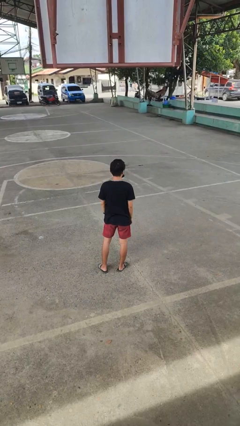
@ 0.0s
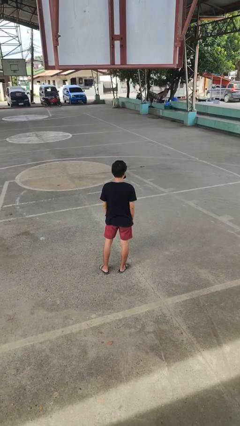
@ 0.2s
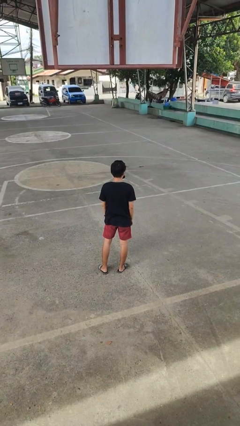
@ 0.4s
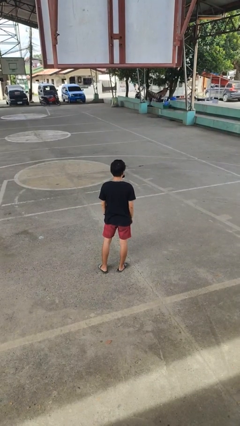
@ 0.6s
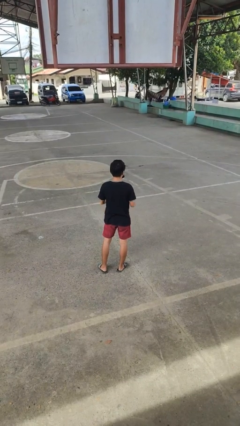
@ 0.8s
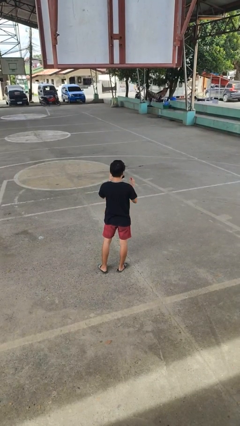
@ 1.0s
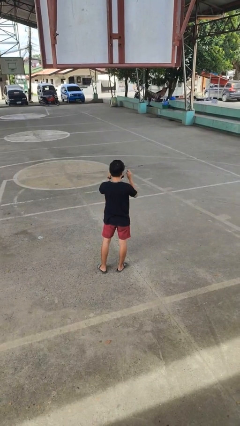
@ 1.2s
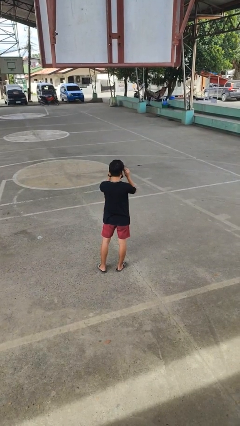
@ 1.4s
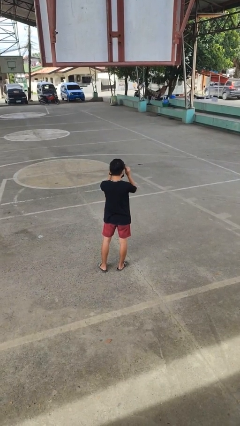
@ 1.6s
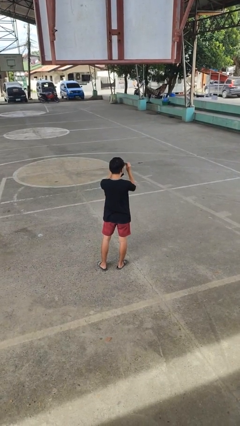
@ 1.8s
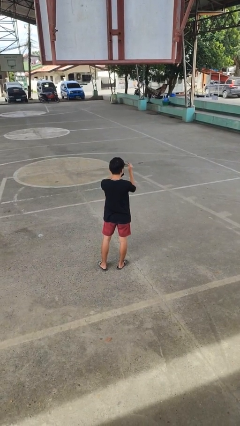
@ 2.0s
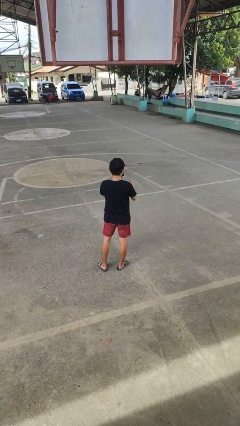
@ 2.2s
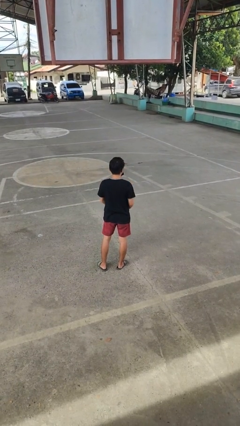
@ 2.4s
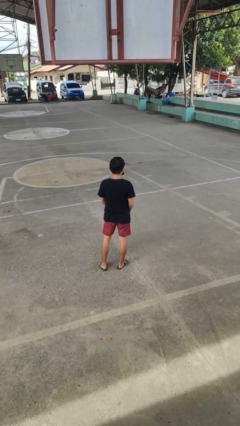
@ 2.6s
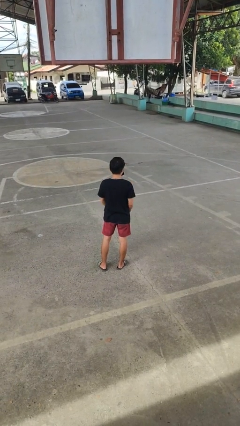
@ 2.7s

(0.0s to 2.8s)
person takes off glasses

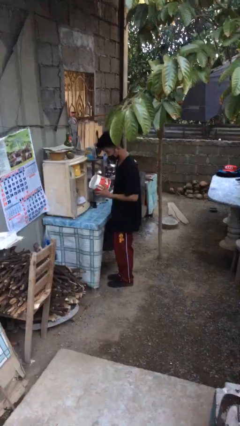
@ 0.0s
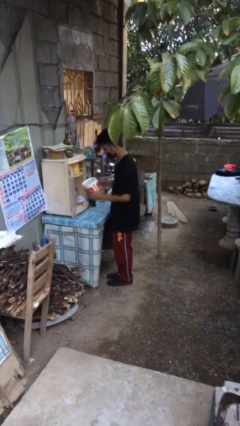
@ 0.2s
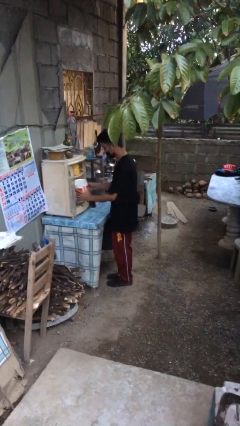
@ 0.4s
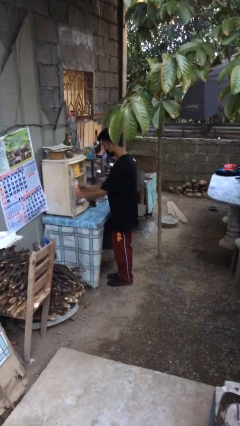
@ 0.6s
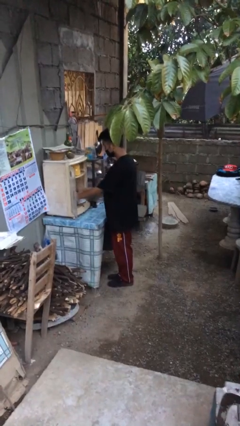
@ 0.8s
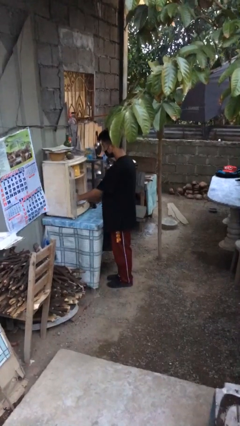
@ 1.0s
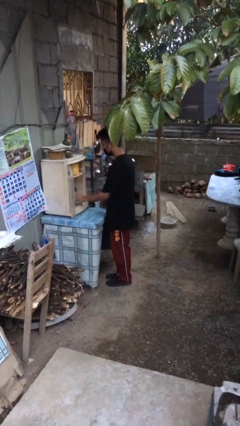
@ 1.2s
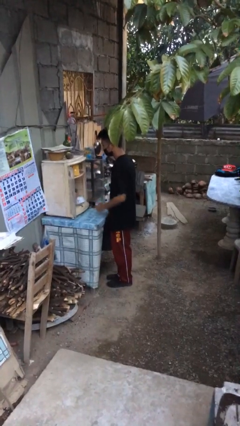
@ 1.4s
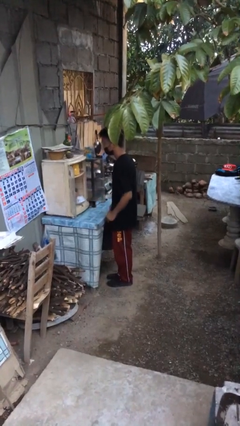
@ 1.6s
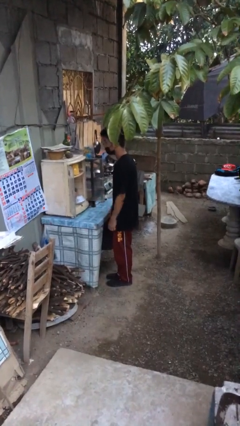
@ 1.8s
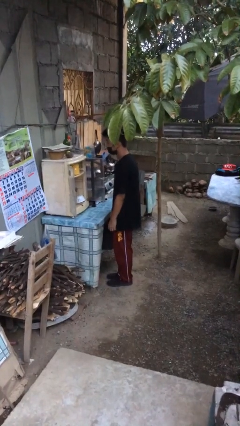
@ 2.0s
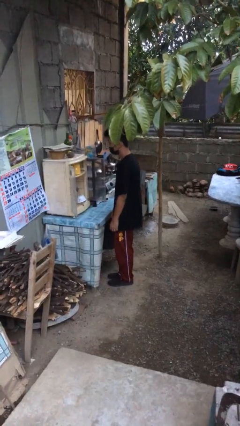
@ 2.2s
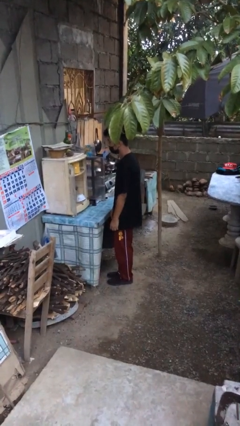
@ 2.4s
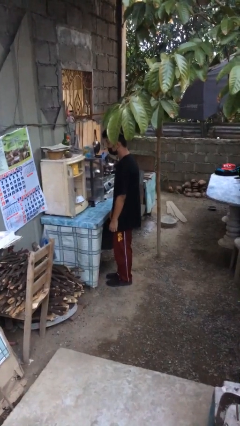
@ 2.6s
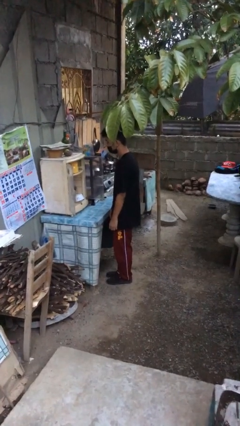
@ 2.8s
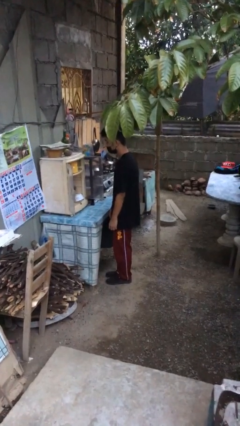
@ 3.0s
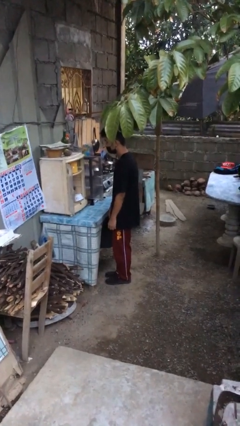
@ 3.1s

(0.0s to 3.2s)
person puts down object into cabinet

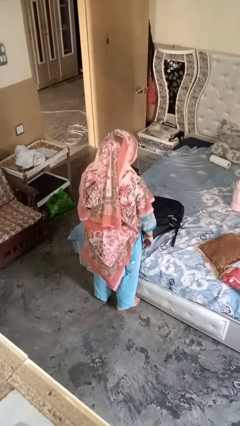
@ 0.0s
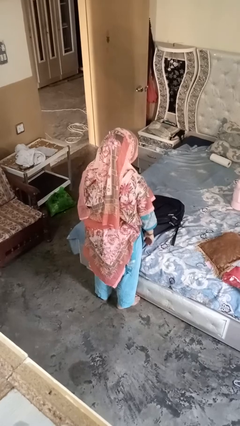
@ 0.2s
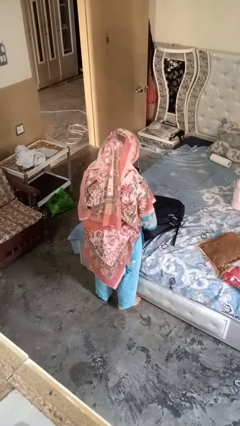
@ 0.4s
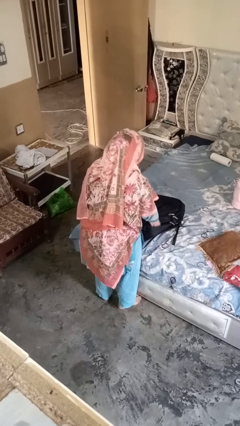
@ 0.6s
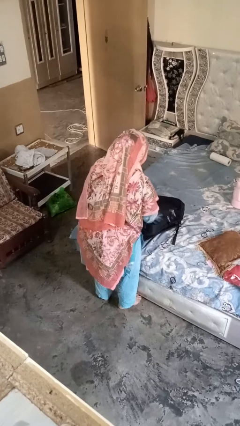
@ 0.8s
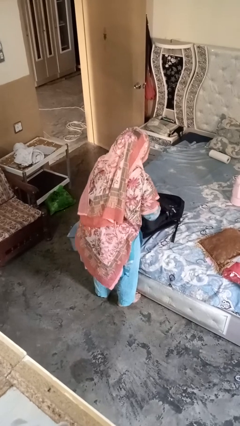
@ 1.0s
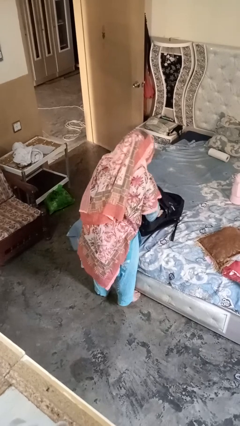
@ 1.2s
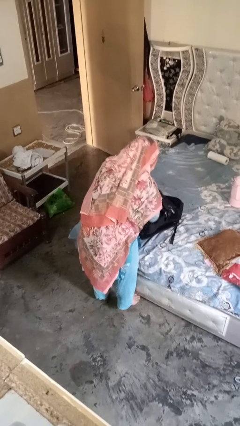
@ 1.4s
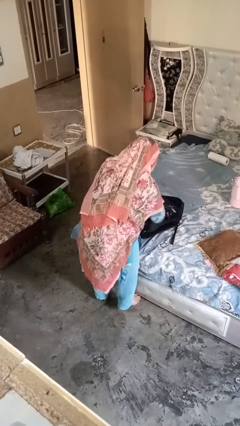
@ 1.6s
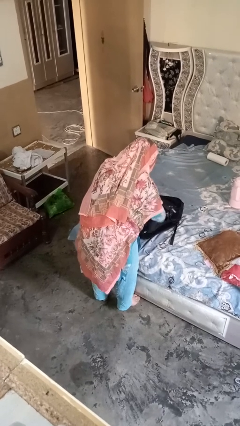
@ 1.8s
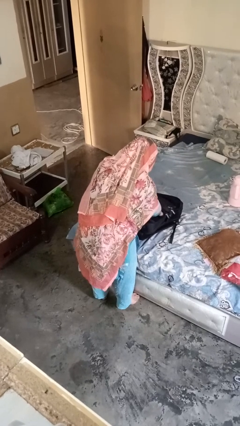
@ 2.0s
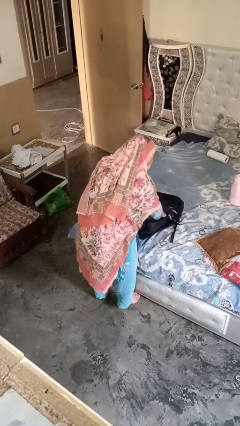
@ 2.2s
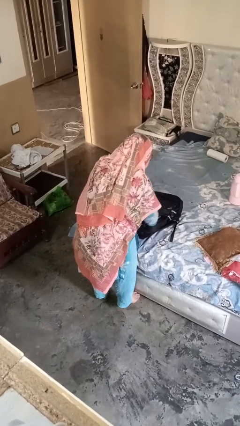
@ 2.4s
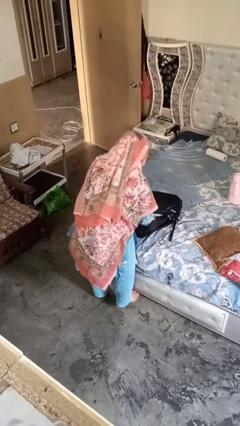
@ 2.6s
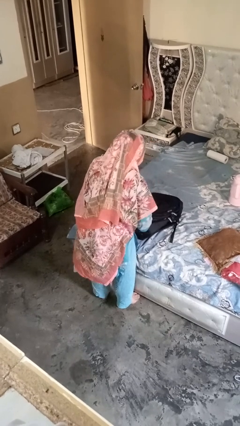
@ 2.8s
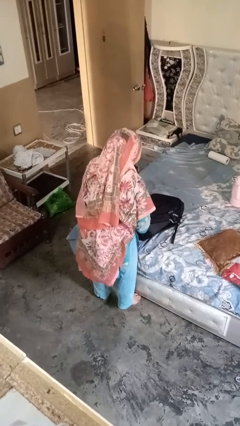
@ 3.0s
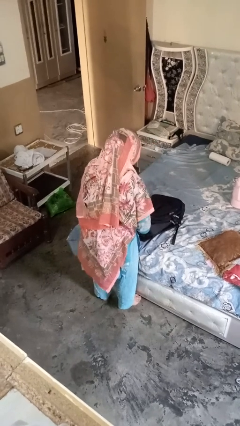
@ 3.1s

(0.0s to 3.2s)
person searches in bag

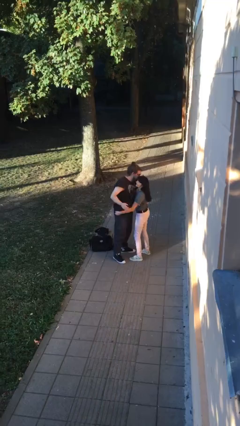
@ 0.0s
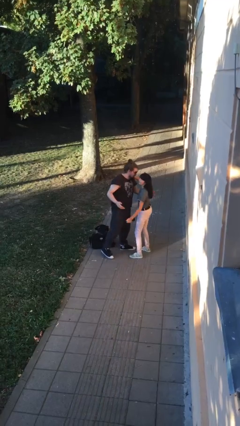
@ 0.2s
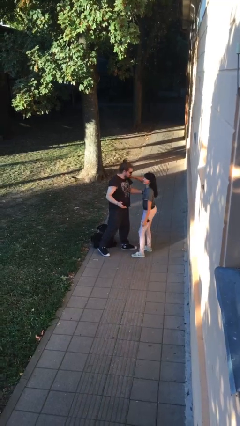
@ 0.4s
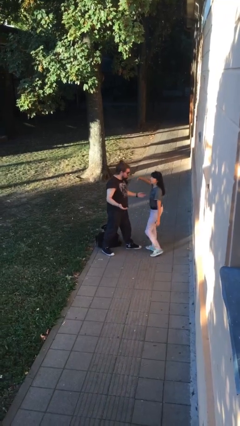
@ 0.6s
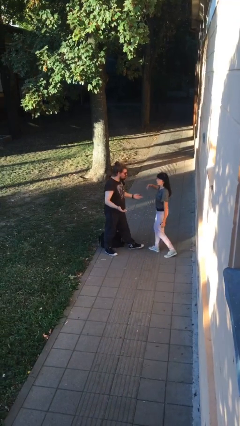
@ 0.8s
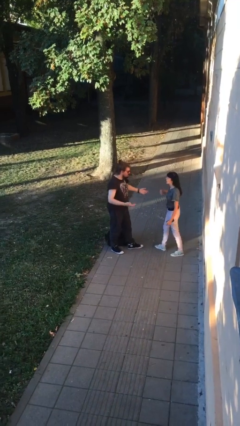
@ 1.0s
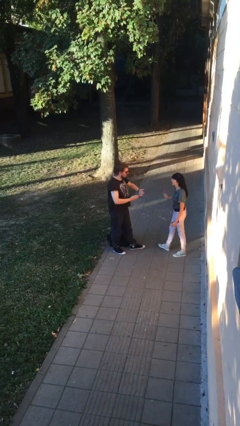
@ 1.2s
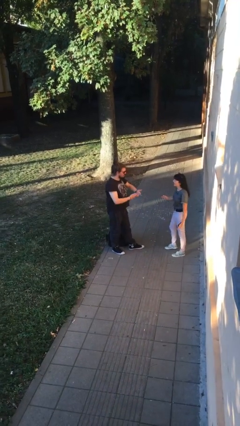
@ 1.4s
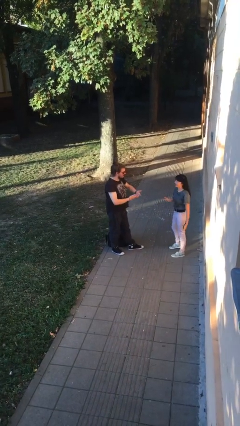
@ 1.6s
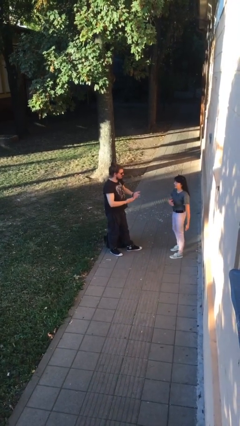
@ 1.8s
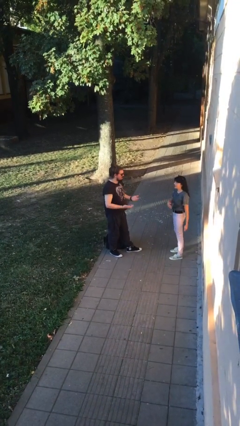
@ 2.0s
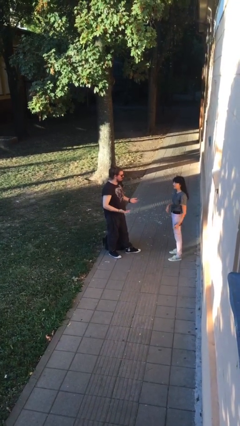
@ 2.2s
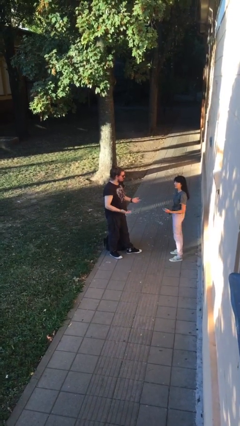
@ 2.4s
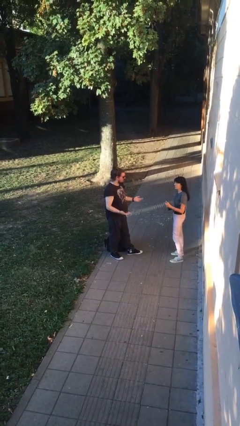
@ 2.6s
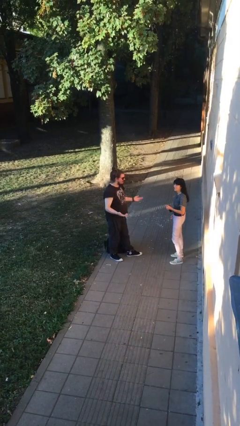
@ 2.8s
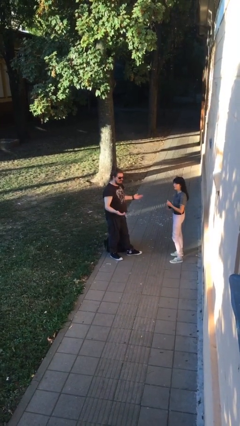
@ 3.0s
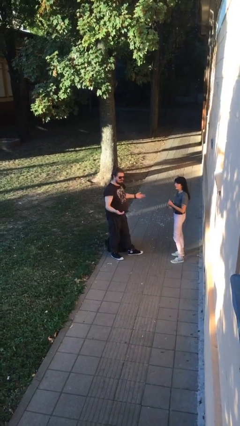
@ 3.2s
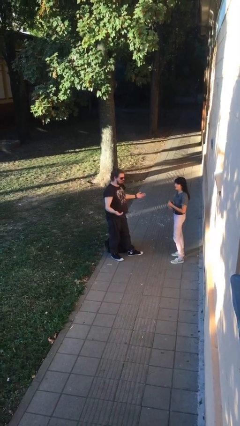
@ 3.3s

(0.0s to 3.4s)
person talks to person

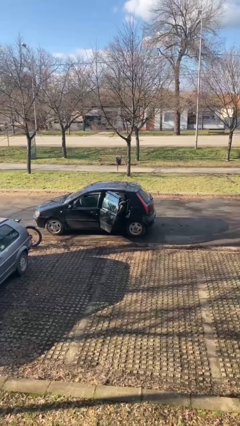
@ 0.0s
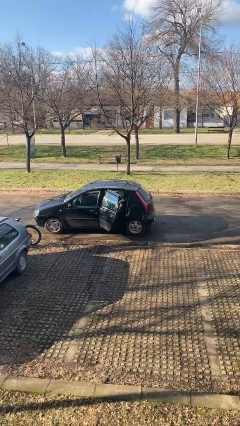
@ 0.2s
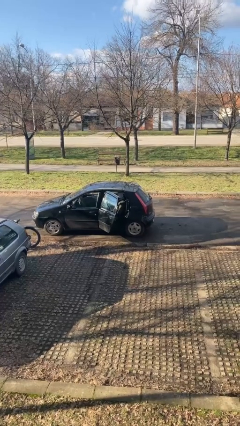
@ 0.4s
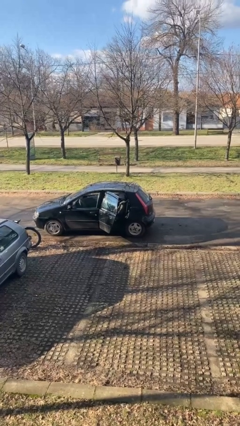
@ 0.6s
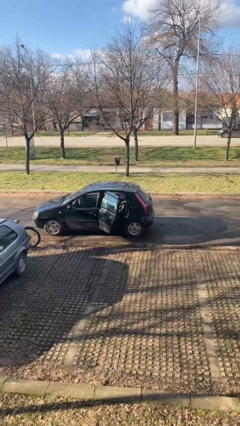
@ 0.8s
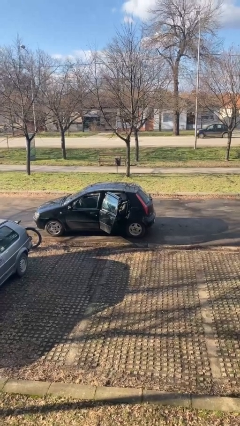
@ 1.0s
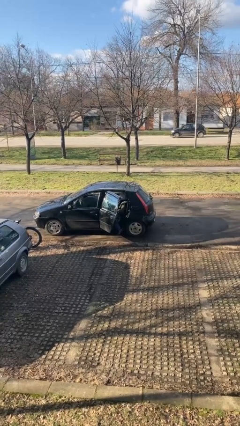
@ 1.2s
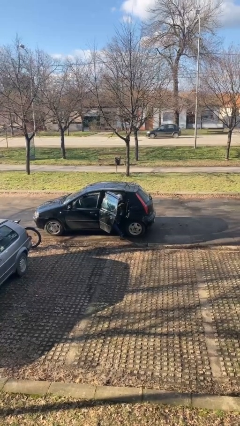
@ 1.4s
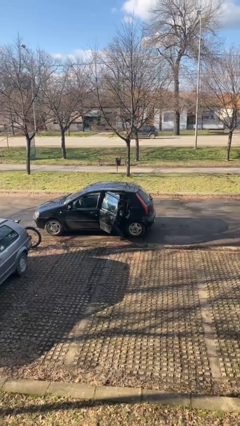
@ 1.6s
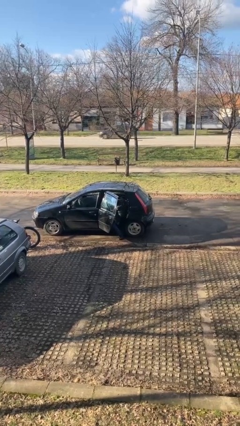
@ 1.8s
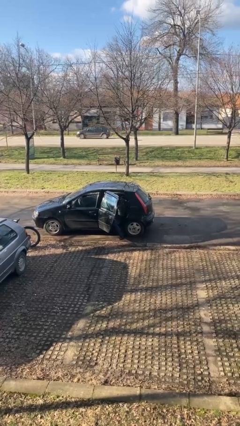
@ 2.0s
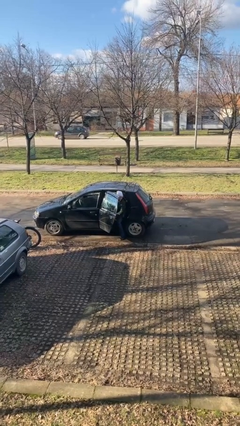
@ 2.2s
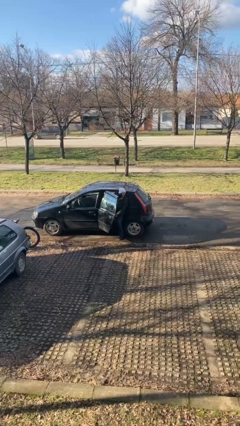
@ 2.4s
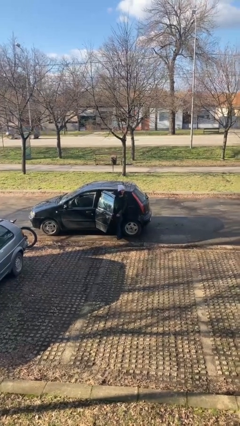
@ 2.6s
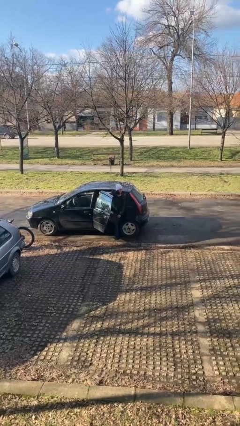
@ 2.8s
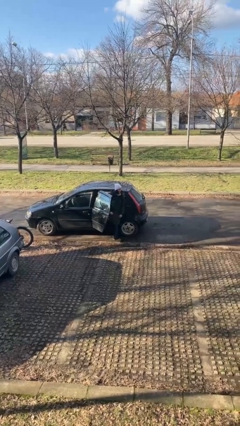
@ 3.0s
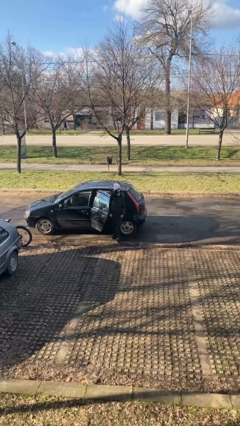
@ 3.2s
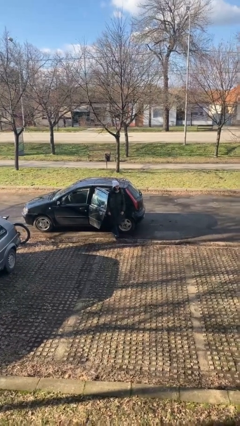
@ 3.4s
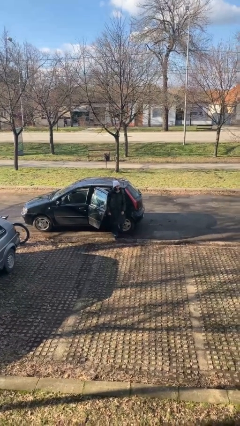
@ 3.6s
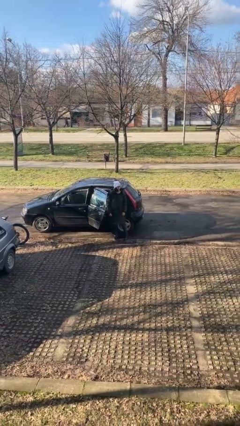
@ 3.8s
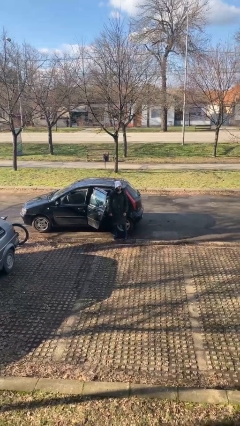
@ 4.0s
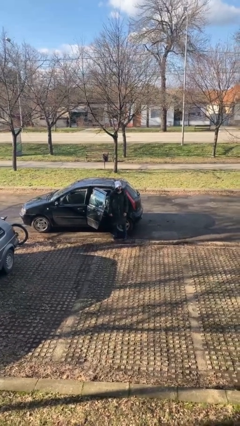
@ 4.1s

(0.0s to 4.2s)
person exits car

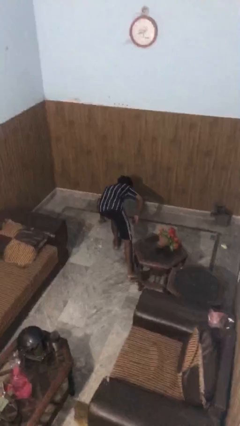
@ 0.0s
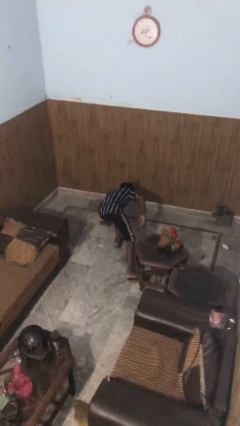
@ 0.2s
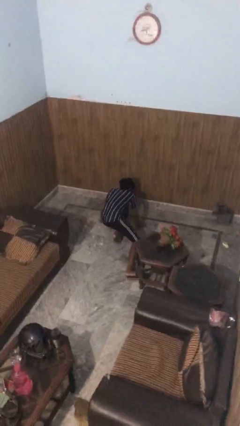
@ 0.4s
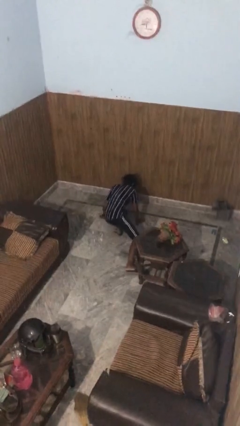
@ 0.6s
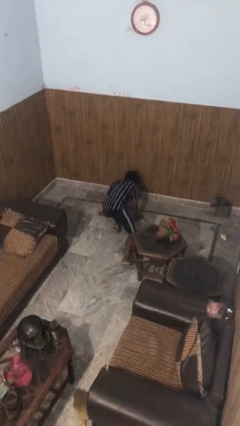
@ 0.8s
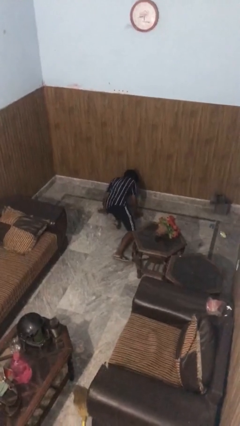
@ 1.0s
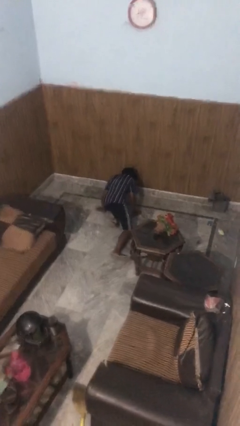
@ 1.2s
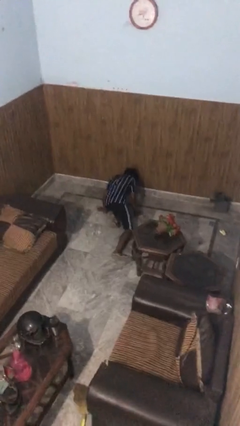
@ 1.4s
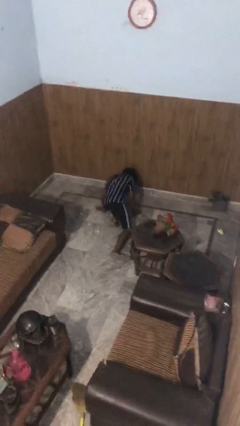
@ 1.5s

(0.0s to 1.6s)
person lies down on floor
